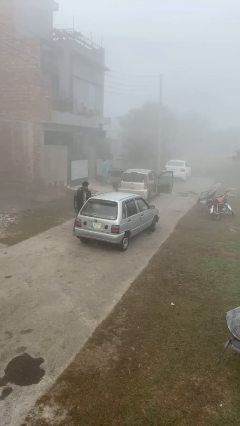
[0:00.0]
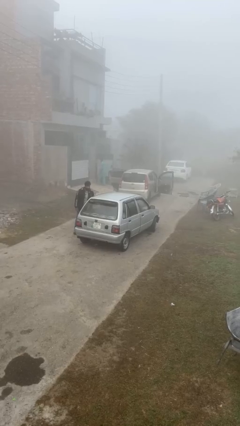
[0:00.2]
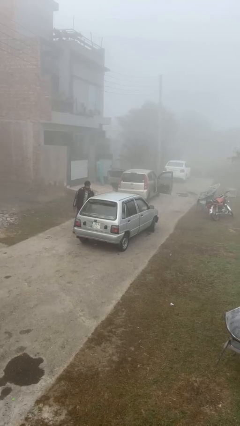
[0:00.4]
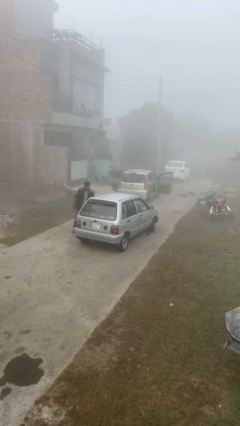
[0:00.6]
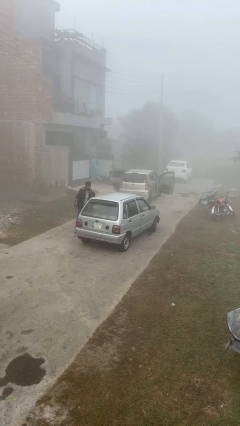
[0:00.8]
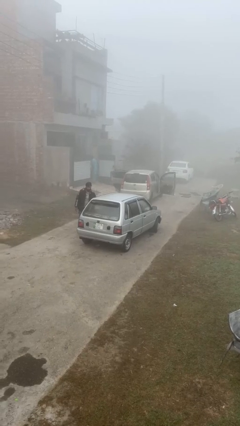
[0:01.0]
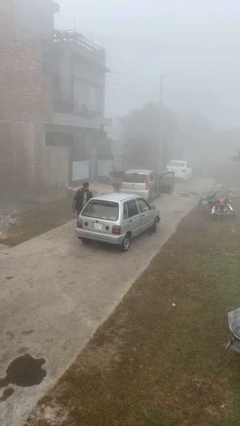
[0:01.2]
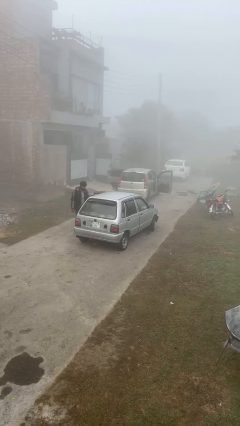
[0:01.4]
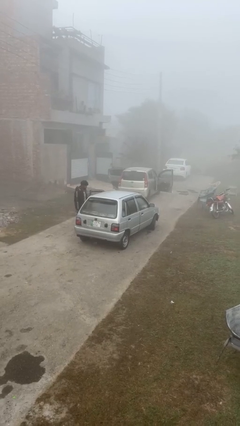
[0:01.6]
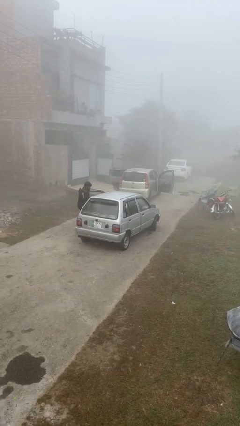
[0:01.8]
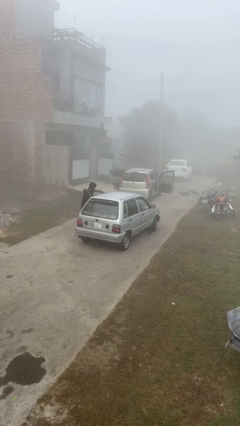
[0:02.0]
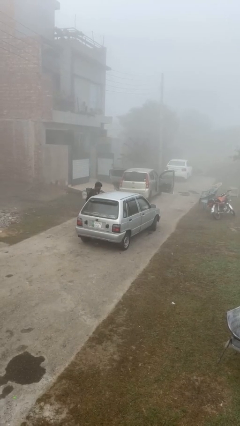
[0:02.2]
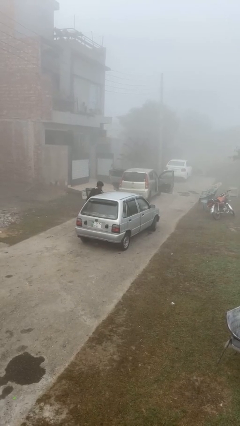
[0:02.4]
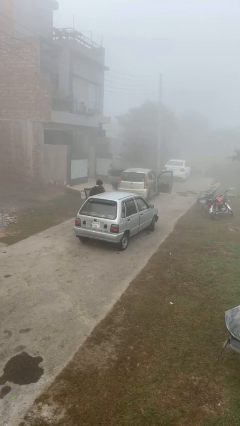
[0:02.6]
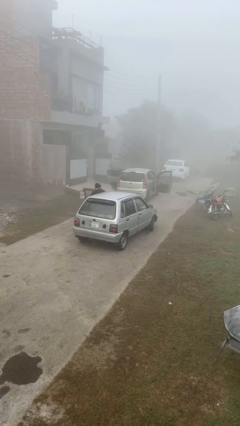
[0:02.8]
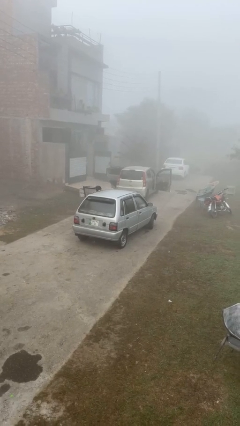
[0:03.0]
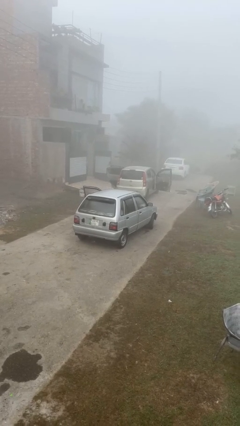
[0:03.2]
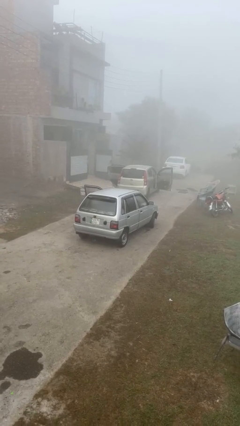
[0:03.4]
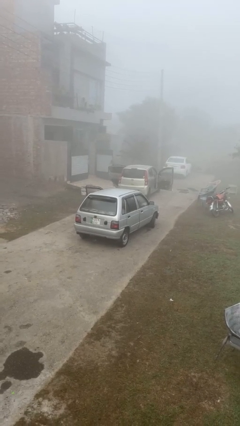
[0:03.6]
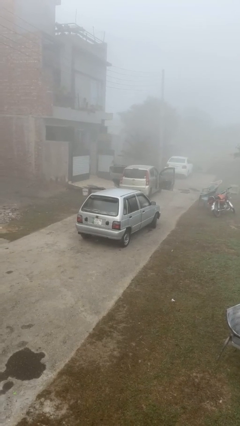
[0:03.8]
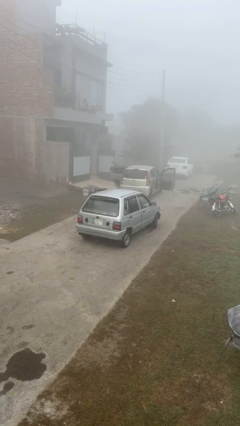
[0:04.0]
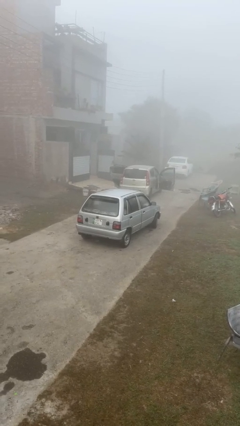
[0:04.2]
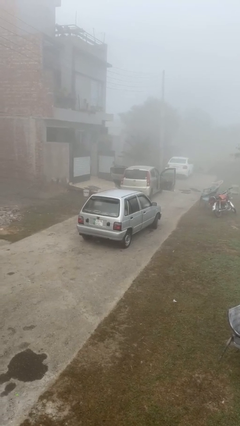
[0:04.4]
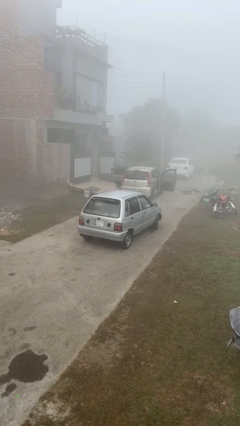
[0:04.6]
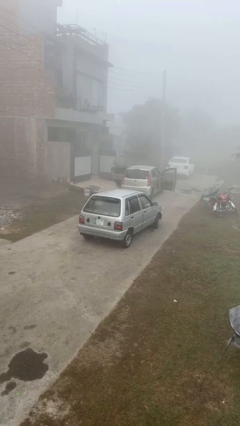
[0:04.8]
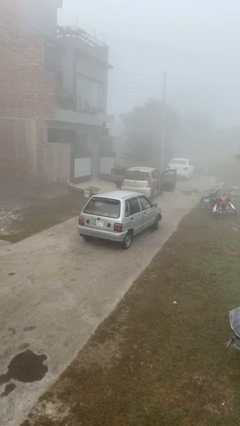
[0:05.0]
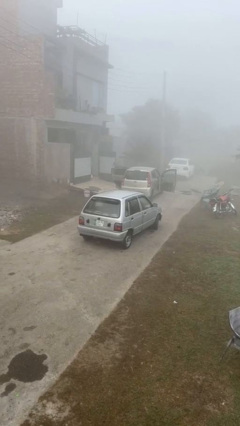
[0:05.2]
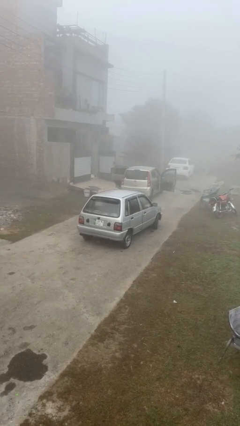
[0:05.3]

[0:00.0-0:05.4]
car picks up person

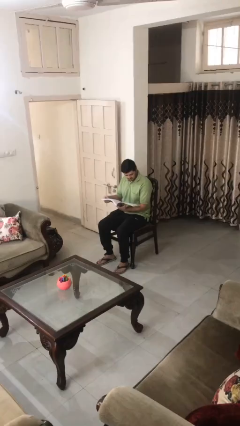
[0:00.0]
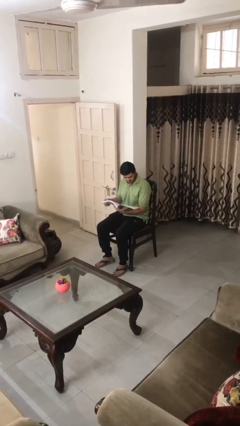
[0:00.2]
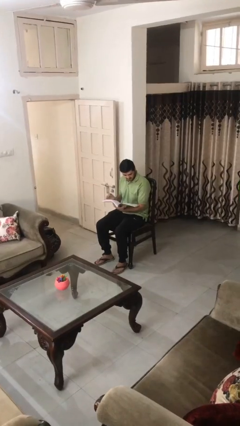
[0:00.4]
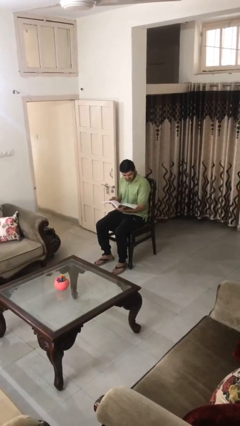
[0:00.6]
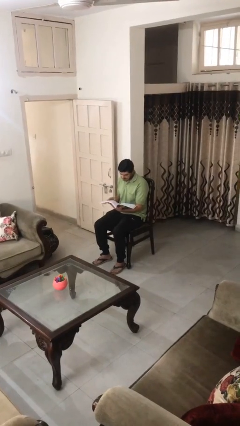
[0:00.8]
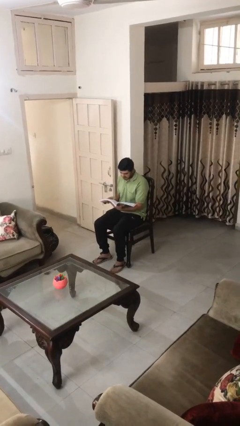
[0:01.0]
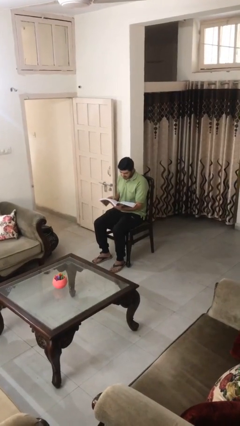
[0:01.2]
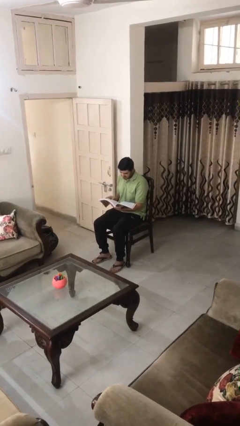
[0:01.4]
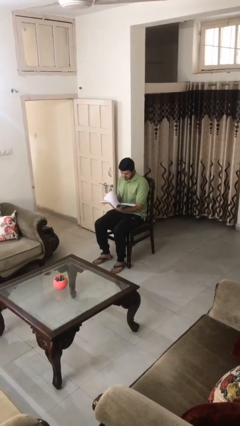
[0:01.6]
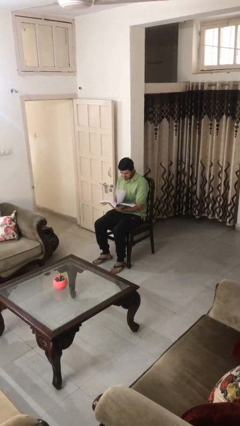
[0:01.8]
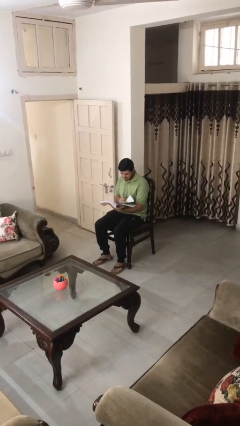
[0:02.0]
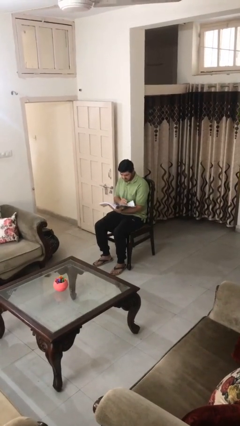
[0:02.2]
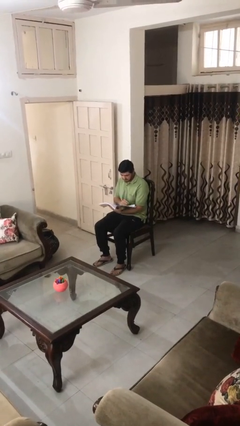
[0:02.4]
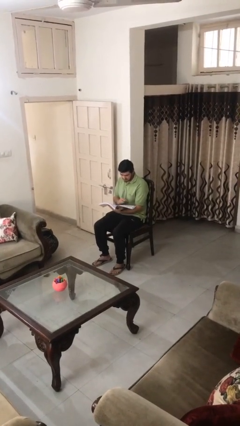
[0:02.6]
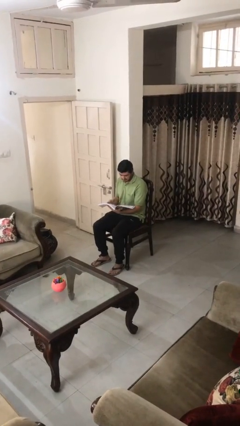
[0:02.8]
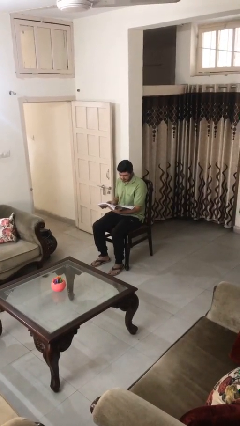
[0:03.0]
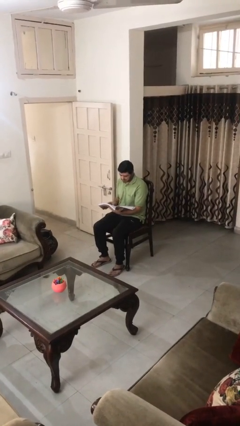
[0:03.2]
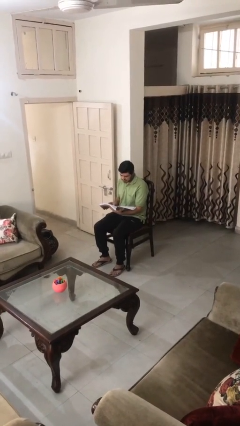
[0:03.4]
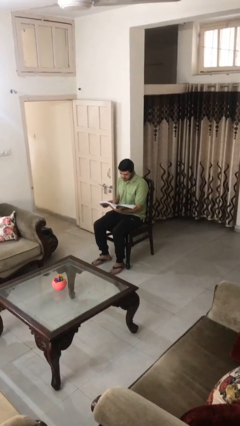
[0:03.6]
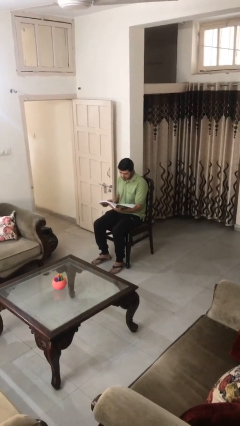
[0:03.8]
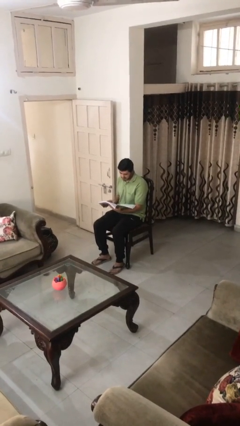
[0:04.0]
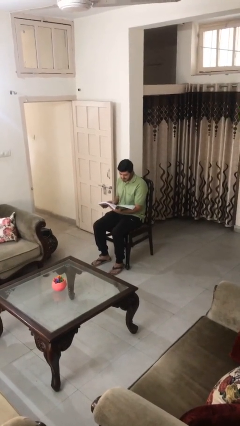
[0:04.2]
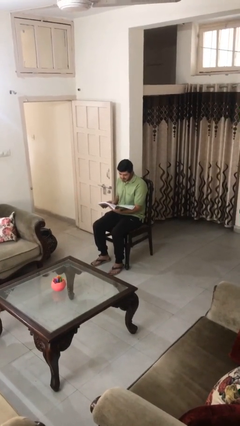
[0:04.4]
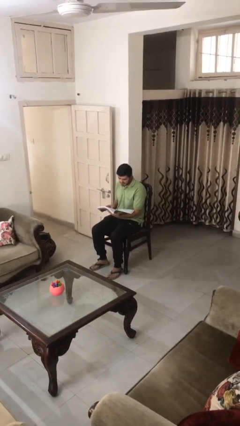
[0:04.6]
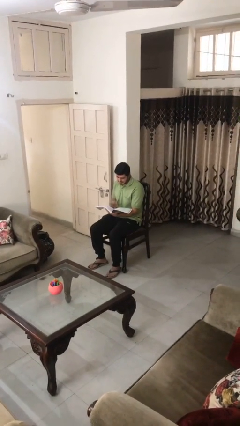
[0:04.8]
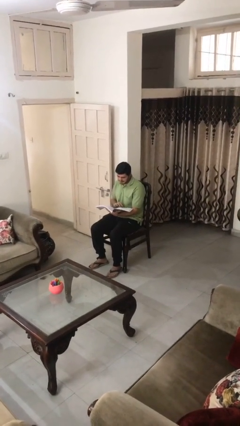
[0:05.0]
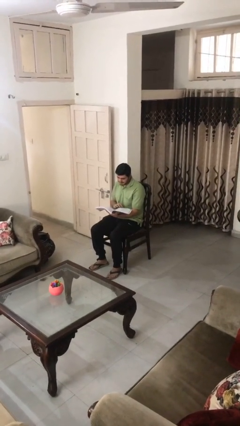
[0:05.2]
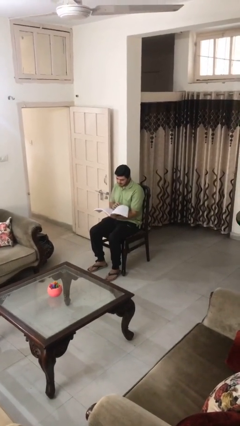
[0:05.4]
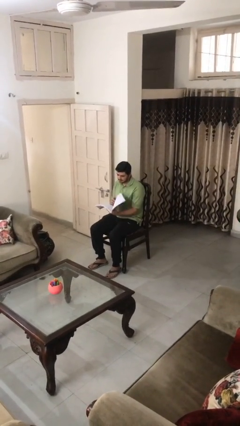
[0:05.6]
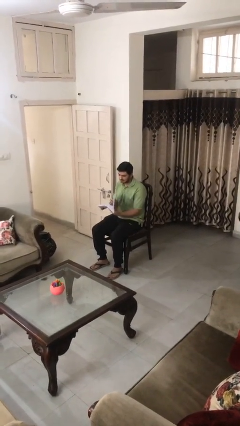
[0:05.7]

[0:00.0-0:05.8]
person reads document

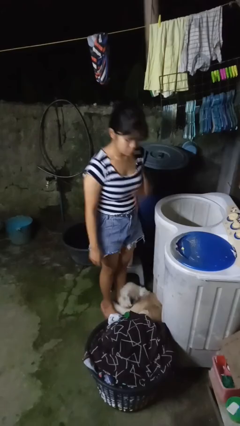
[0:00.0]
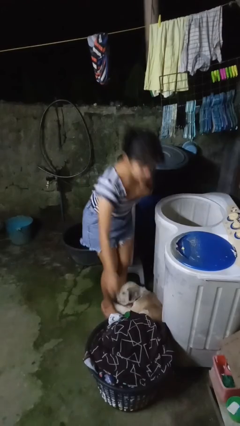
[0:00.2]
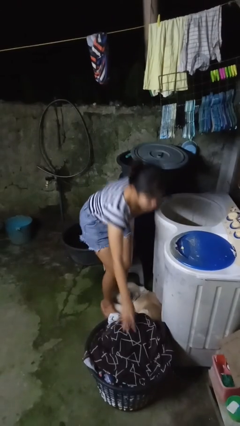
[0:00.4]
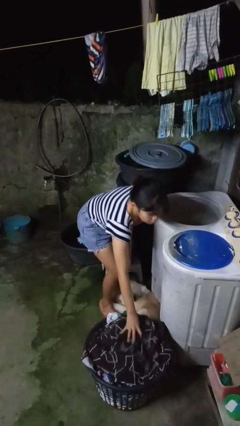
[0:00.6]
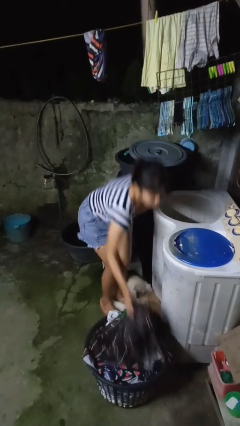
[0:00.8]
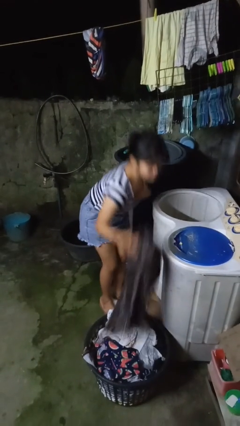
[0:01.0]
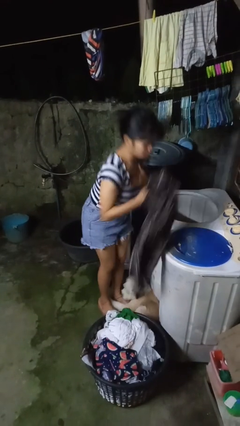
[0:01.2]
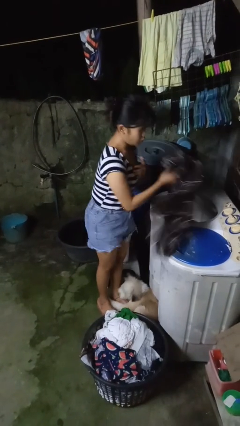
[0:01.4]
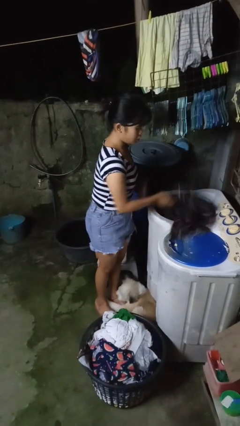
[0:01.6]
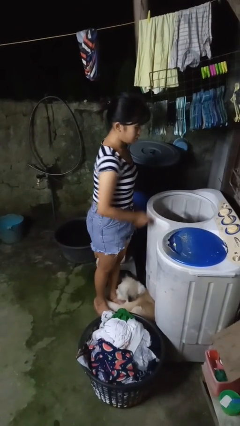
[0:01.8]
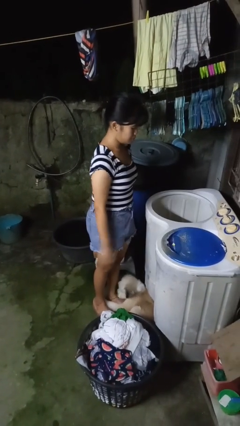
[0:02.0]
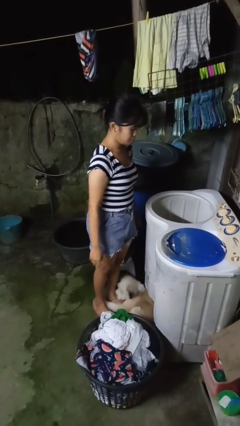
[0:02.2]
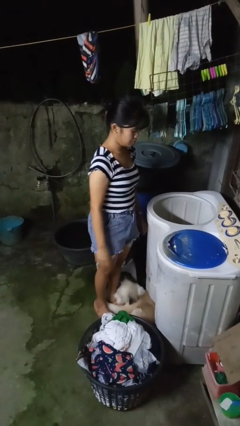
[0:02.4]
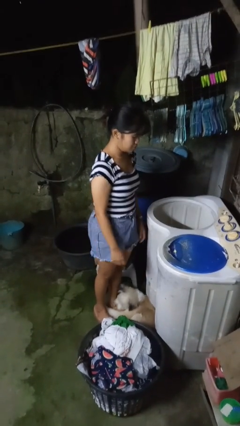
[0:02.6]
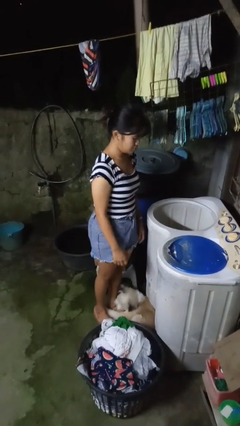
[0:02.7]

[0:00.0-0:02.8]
person loads clotheswasher

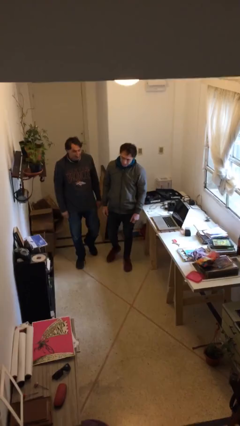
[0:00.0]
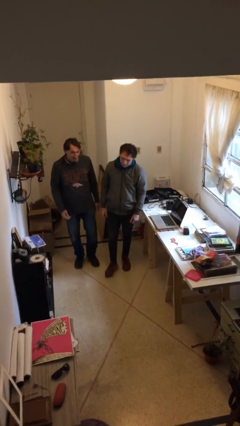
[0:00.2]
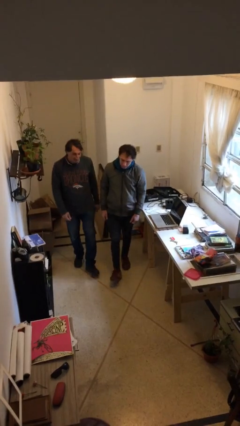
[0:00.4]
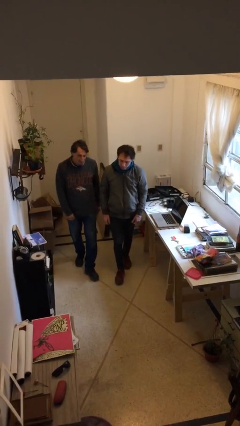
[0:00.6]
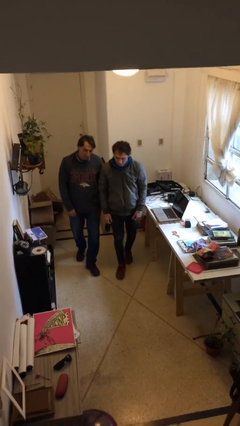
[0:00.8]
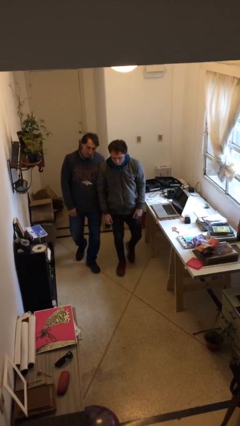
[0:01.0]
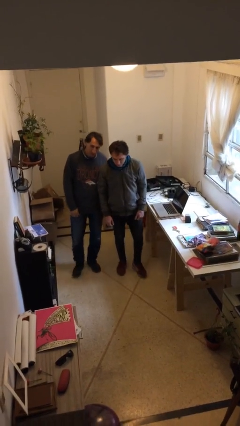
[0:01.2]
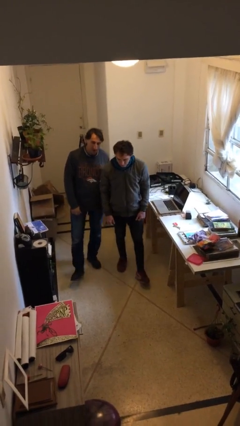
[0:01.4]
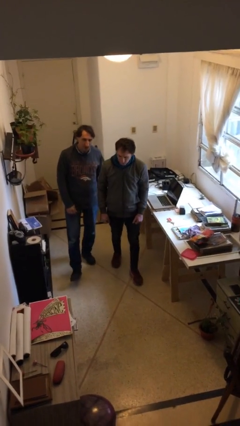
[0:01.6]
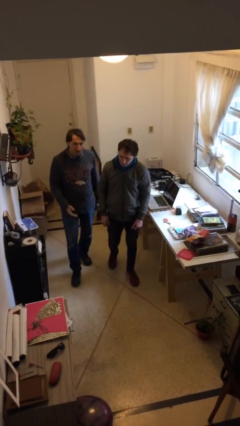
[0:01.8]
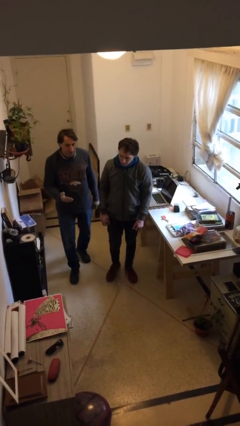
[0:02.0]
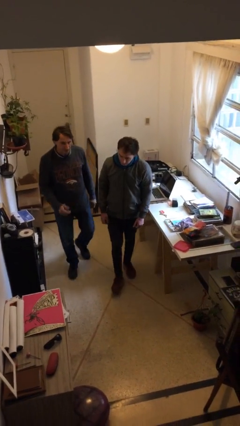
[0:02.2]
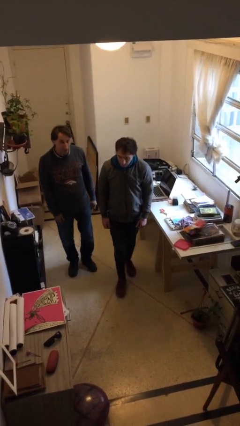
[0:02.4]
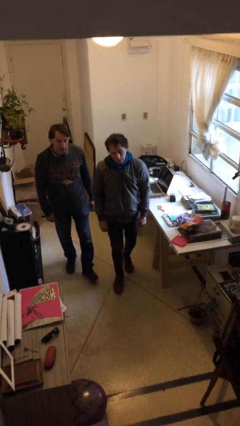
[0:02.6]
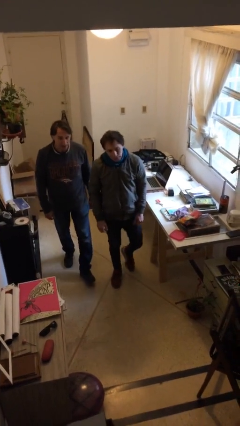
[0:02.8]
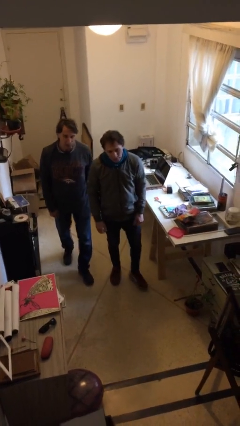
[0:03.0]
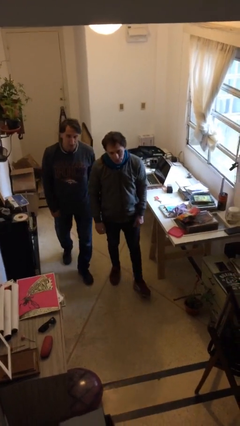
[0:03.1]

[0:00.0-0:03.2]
person talks to person

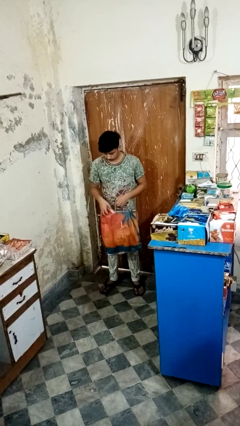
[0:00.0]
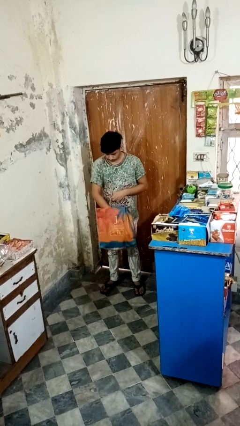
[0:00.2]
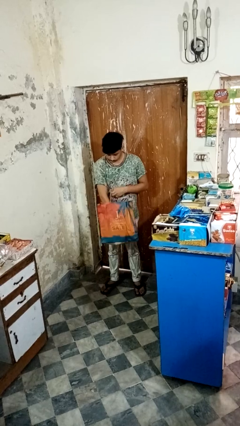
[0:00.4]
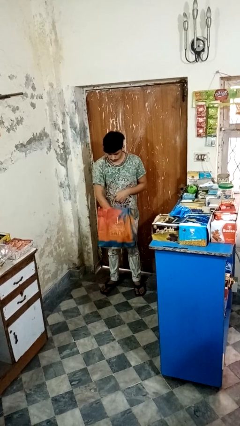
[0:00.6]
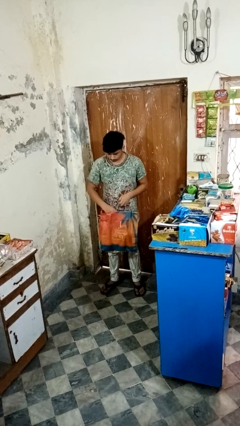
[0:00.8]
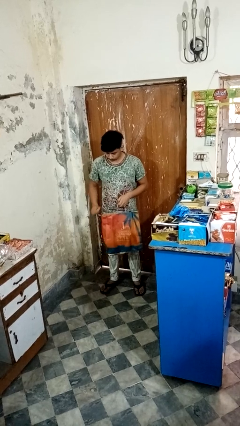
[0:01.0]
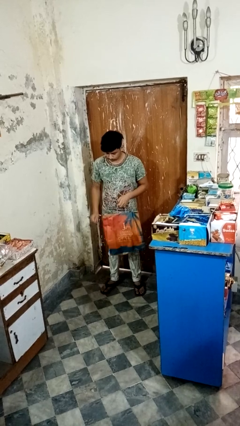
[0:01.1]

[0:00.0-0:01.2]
person puts object into bag
